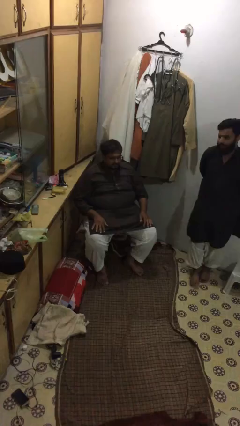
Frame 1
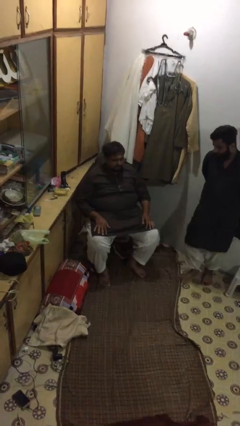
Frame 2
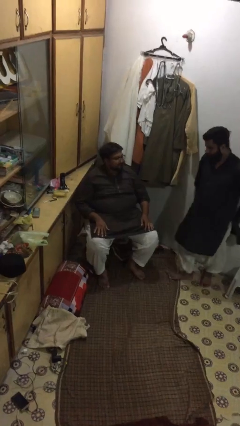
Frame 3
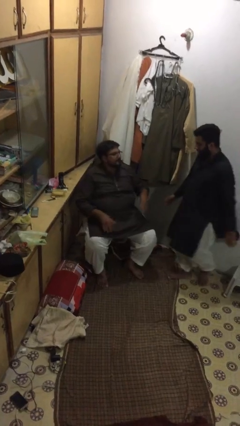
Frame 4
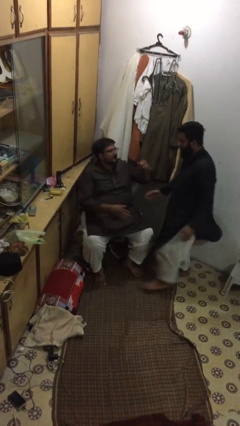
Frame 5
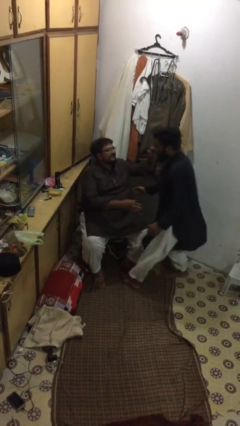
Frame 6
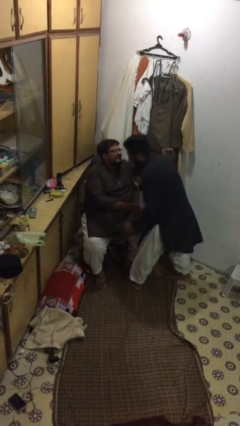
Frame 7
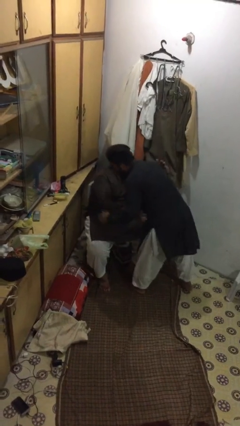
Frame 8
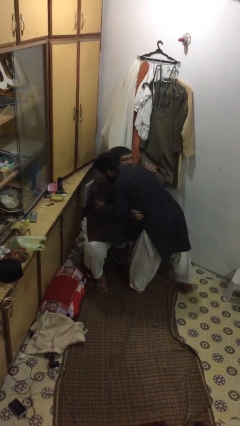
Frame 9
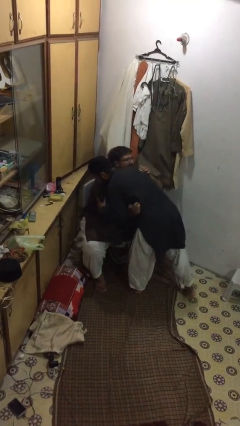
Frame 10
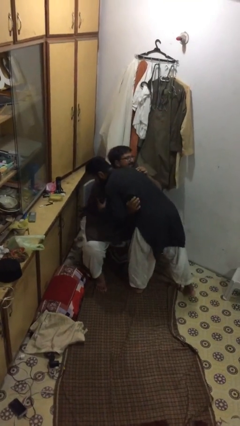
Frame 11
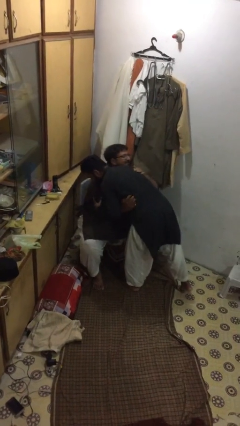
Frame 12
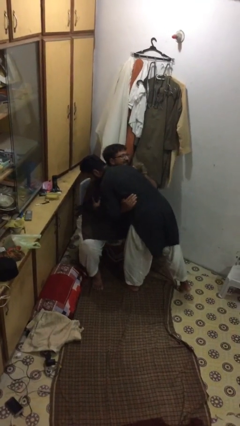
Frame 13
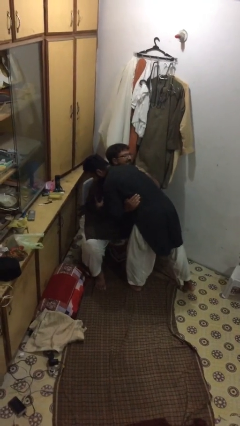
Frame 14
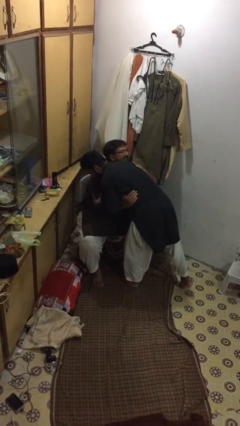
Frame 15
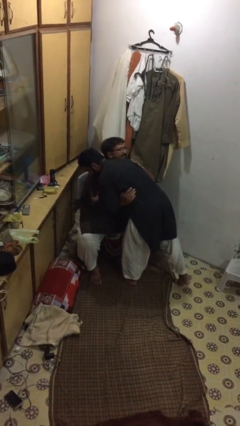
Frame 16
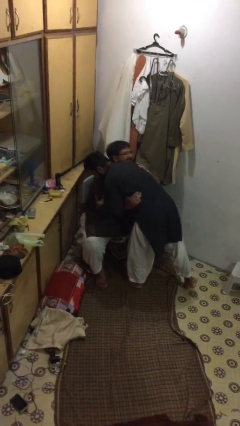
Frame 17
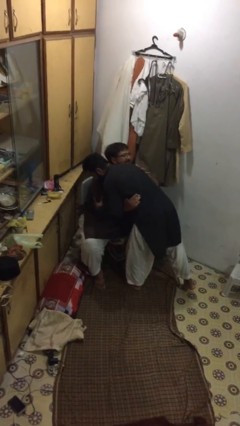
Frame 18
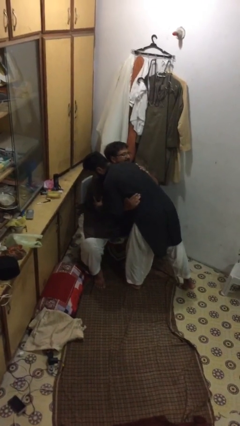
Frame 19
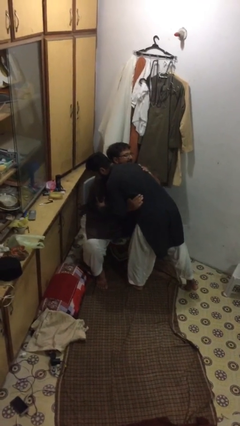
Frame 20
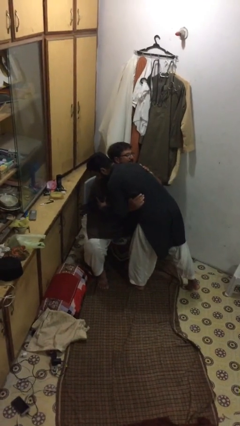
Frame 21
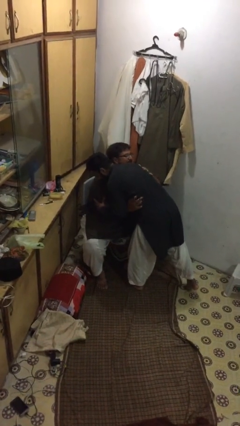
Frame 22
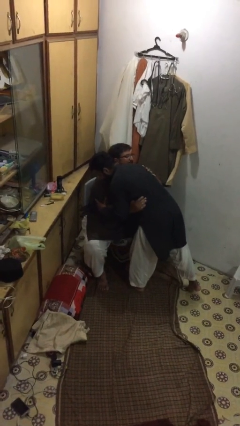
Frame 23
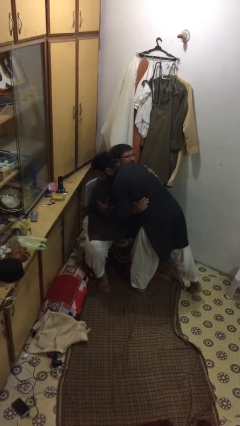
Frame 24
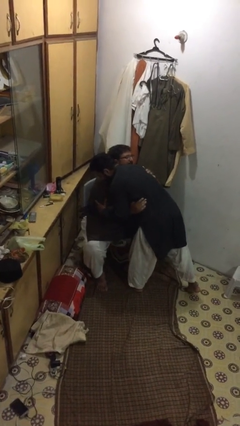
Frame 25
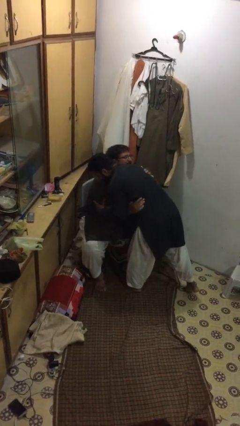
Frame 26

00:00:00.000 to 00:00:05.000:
person embraces person

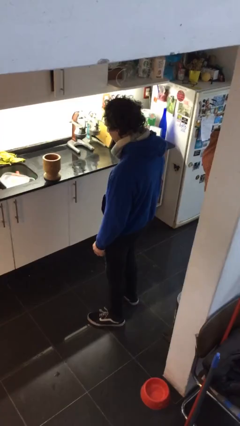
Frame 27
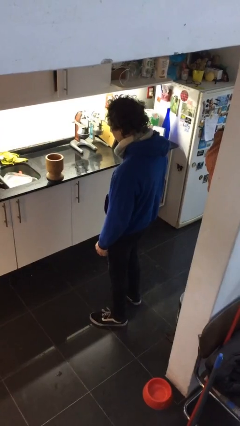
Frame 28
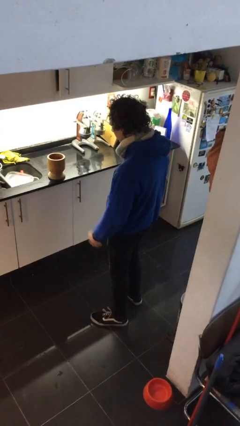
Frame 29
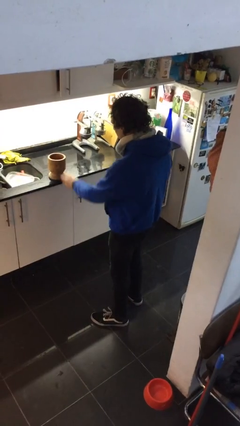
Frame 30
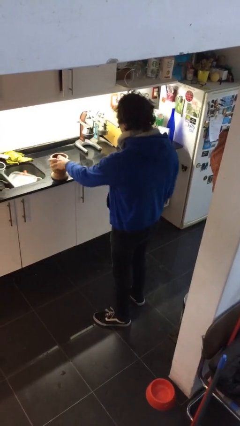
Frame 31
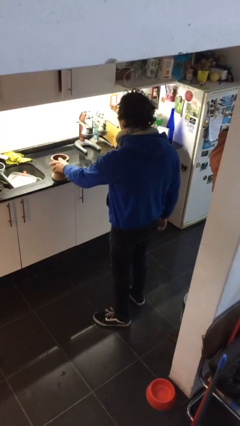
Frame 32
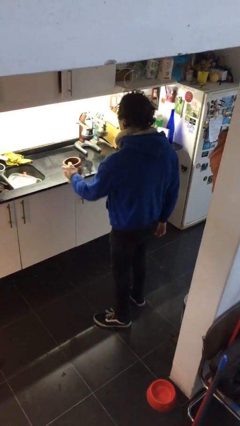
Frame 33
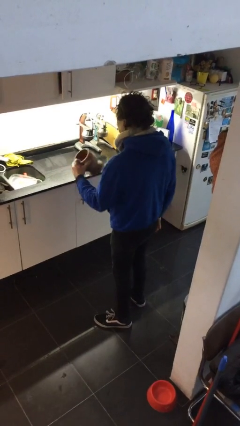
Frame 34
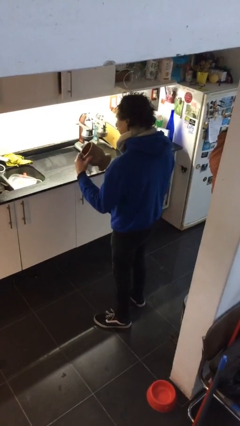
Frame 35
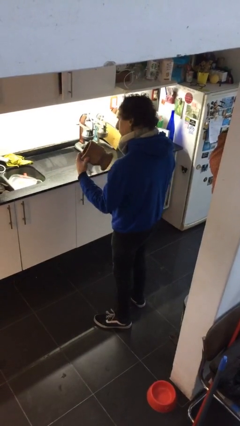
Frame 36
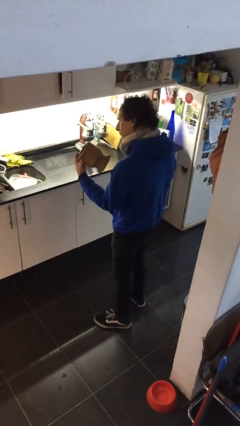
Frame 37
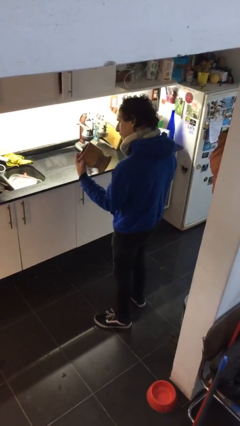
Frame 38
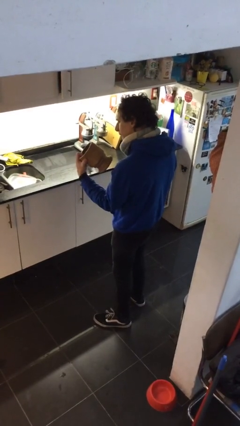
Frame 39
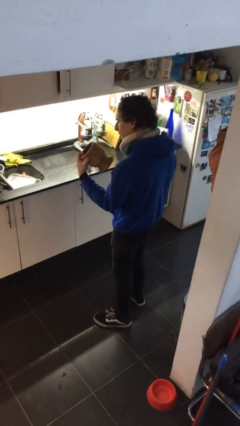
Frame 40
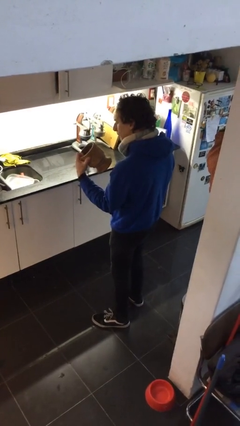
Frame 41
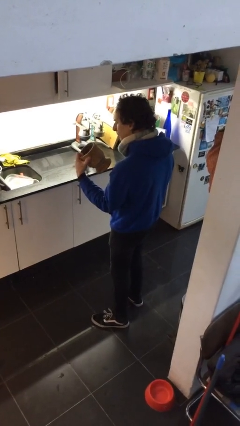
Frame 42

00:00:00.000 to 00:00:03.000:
person picks up object from countertop

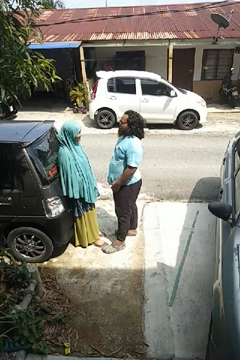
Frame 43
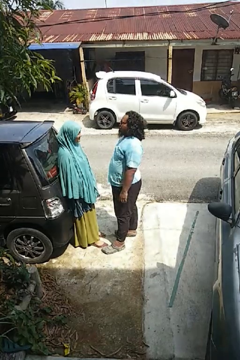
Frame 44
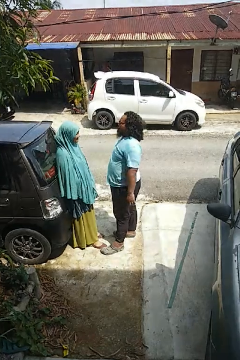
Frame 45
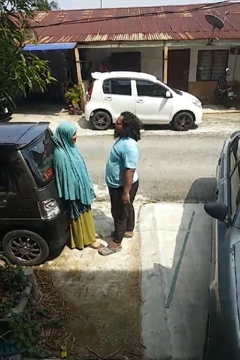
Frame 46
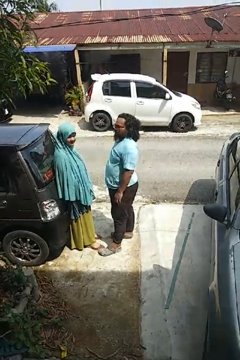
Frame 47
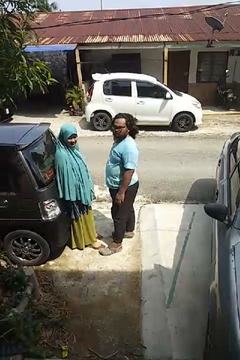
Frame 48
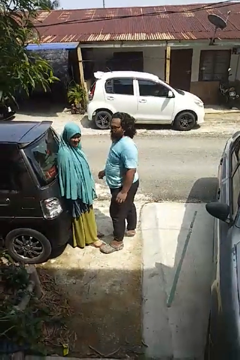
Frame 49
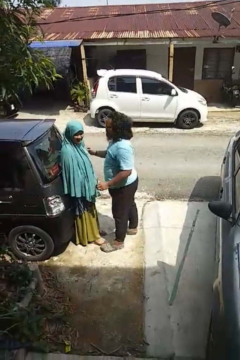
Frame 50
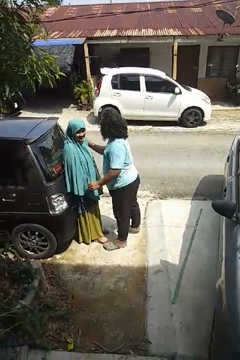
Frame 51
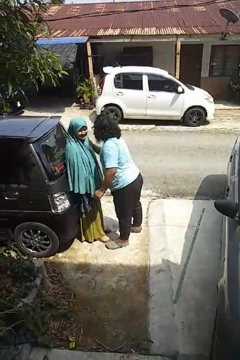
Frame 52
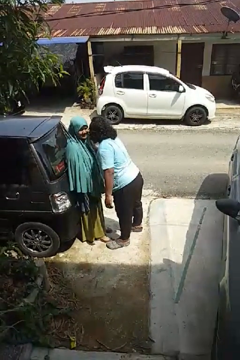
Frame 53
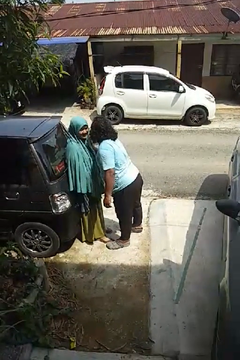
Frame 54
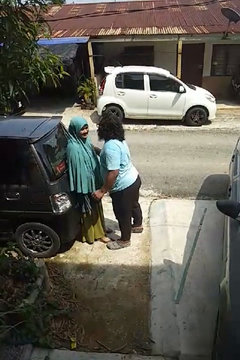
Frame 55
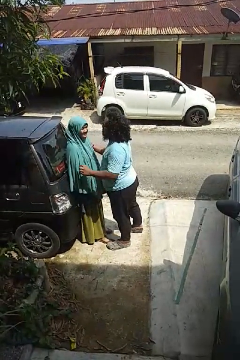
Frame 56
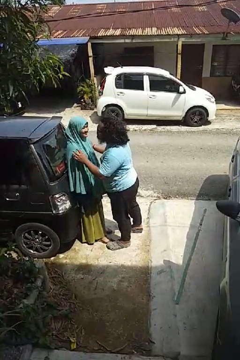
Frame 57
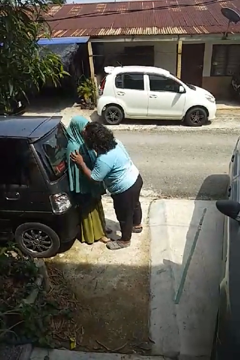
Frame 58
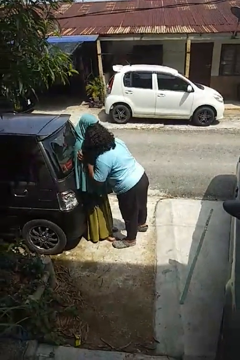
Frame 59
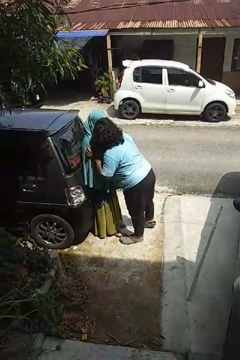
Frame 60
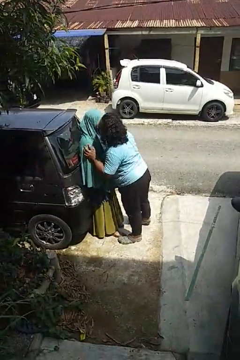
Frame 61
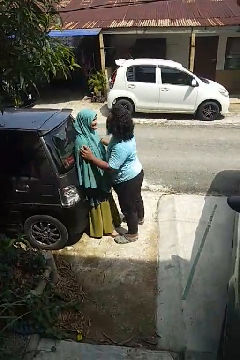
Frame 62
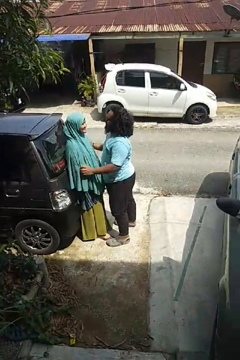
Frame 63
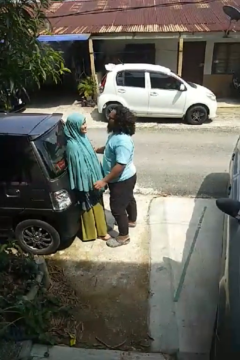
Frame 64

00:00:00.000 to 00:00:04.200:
person kisses cheek of person

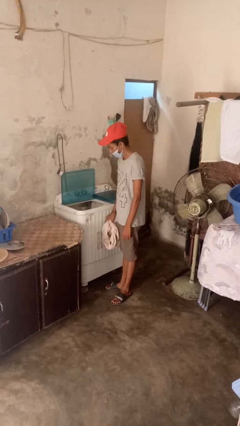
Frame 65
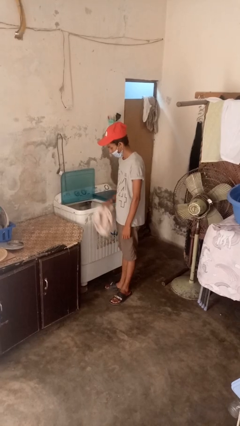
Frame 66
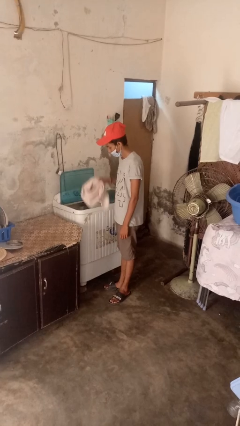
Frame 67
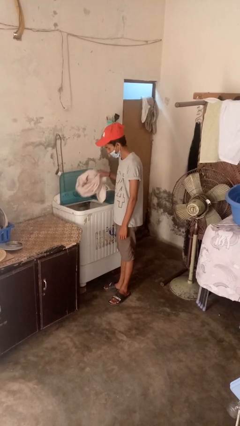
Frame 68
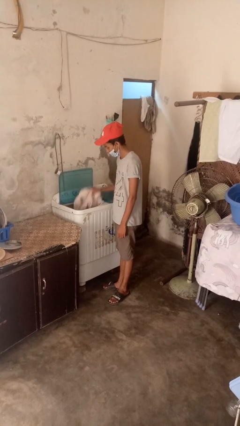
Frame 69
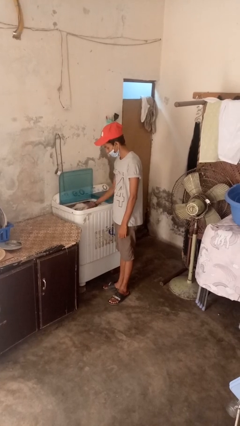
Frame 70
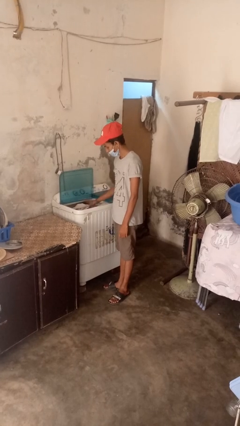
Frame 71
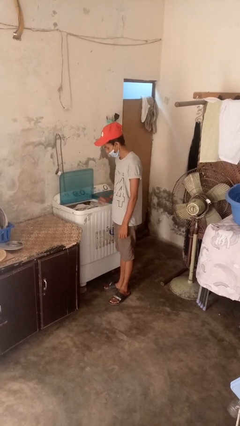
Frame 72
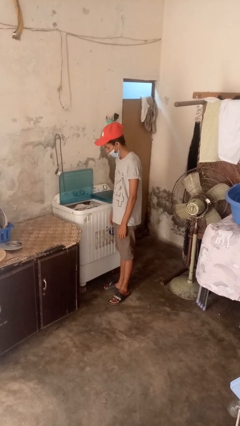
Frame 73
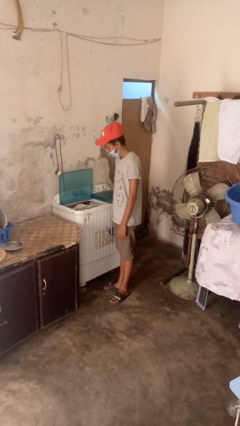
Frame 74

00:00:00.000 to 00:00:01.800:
person loads dryer

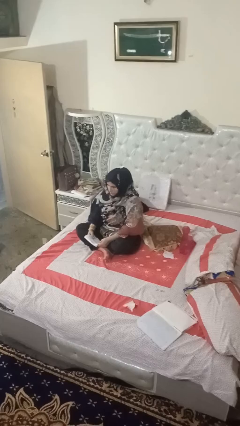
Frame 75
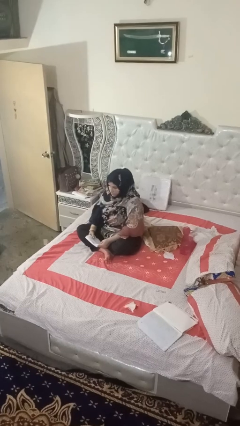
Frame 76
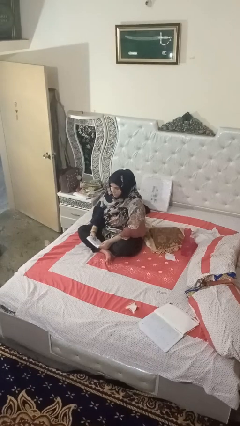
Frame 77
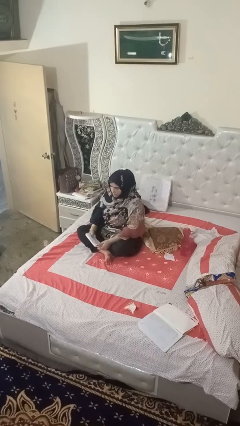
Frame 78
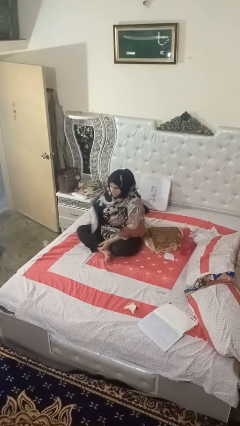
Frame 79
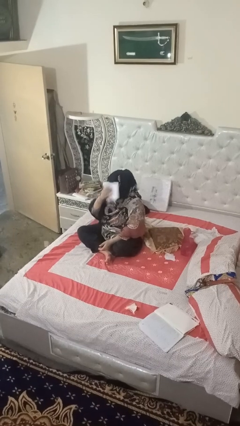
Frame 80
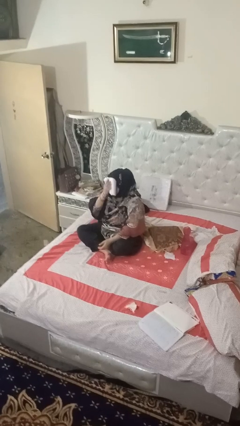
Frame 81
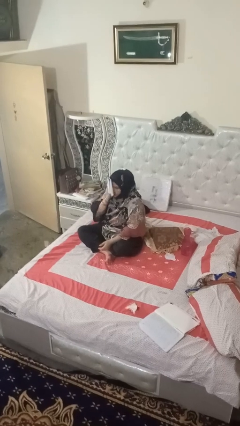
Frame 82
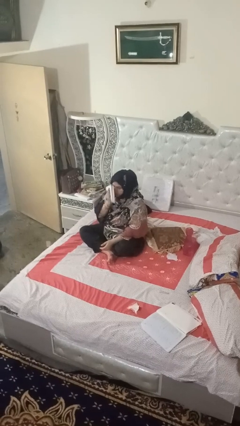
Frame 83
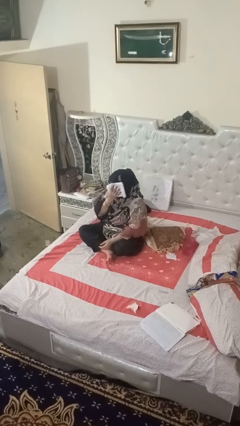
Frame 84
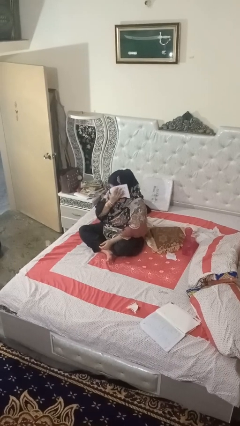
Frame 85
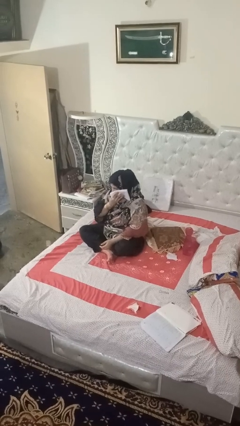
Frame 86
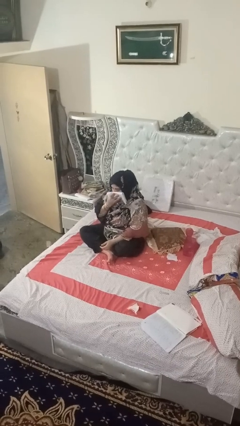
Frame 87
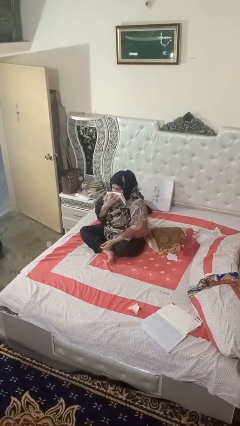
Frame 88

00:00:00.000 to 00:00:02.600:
person wipes mouth with napkin

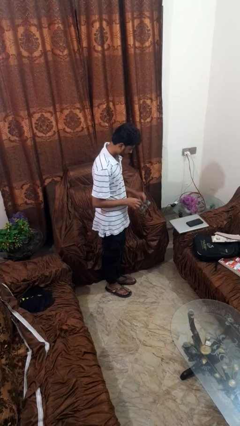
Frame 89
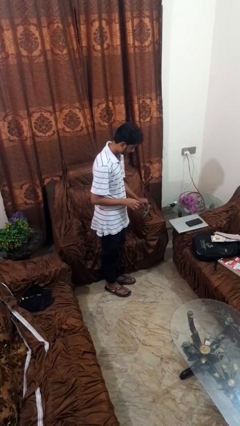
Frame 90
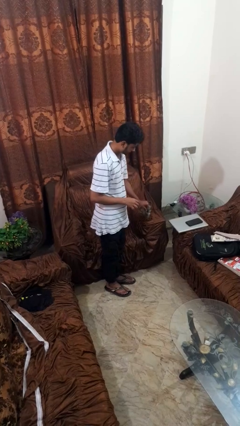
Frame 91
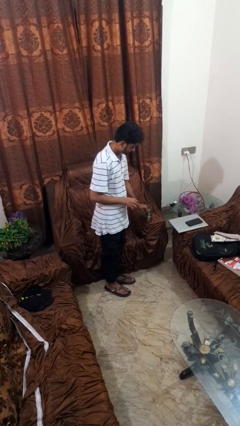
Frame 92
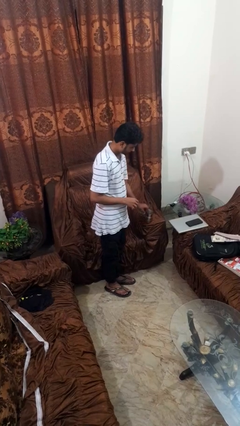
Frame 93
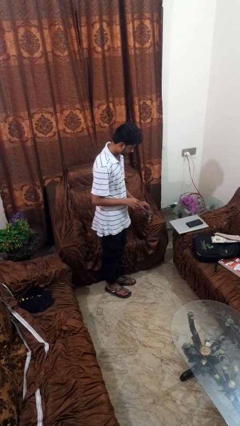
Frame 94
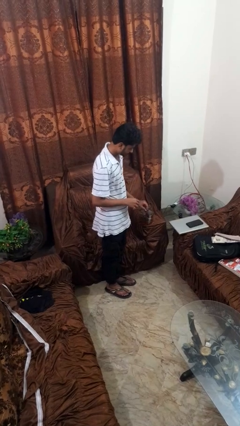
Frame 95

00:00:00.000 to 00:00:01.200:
person puts down object on couch

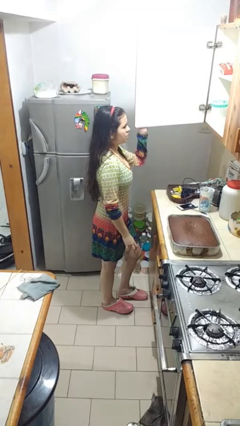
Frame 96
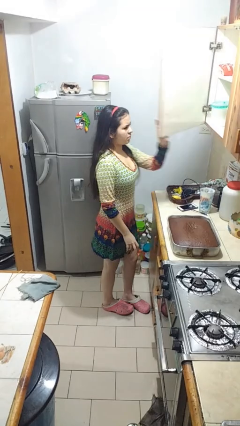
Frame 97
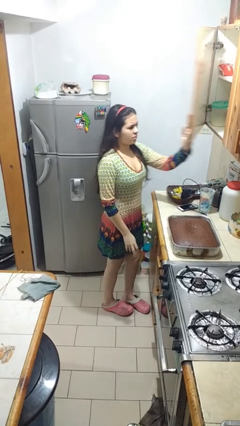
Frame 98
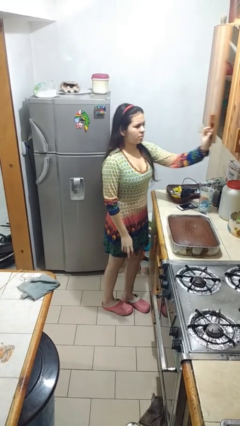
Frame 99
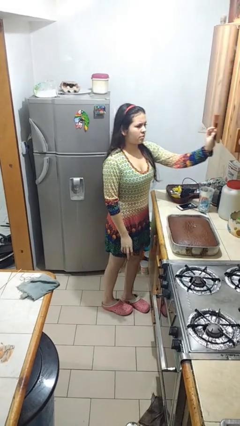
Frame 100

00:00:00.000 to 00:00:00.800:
person closes cabinet
